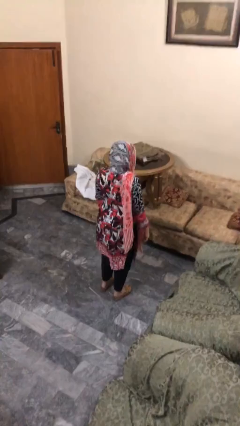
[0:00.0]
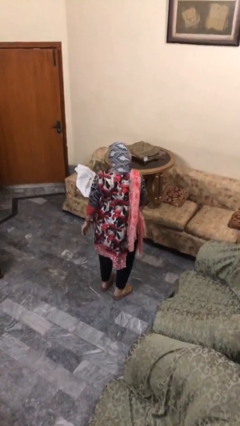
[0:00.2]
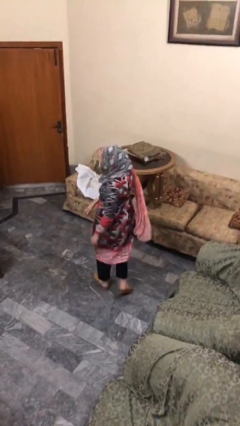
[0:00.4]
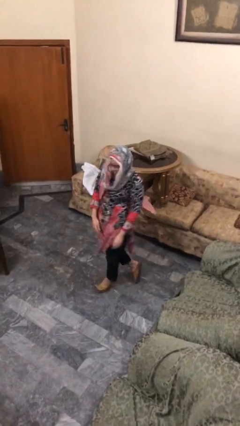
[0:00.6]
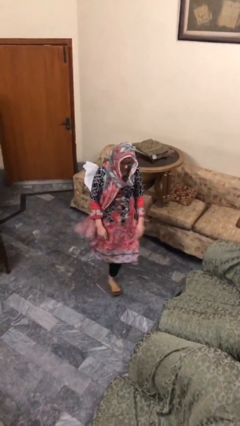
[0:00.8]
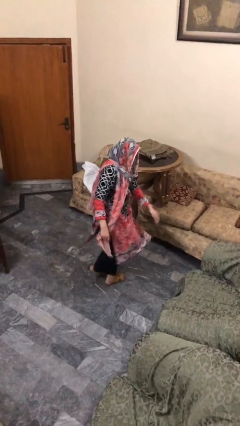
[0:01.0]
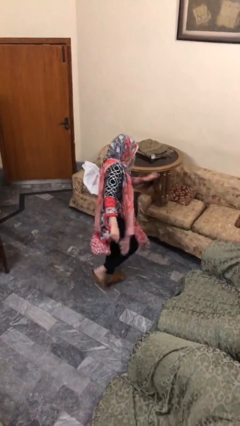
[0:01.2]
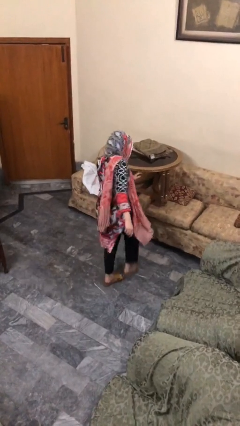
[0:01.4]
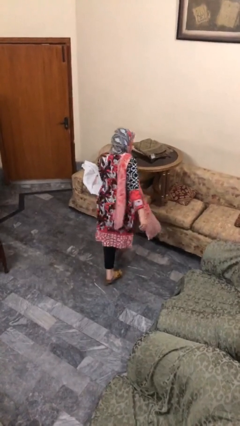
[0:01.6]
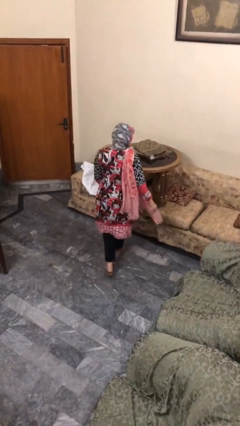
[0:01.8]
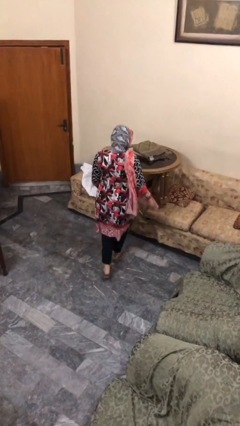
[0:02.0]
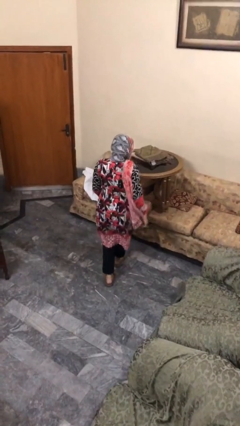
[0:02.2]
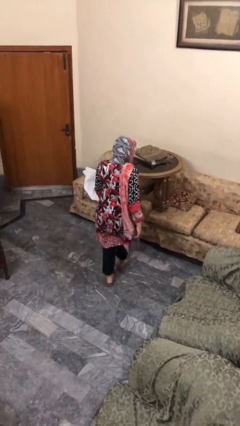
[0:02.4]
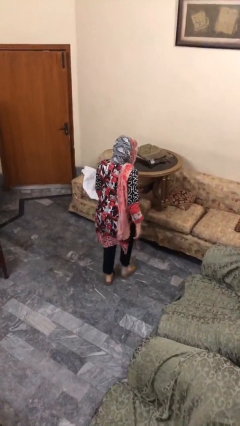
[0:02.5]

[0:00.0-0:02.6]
person twirls

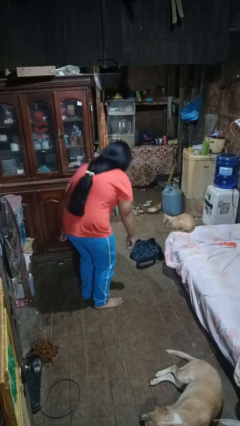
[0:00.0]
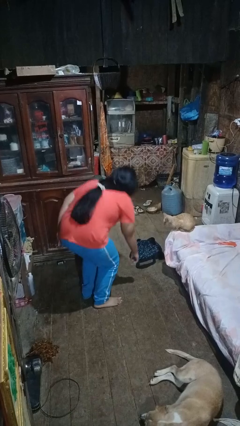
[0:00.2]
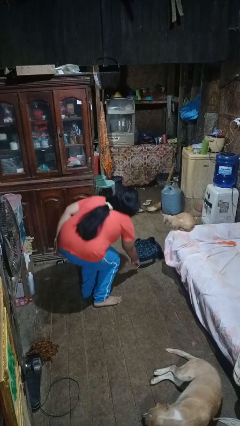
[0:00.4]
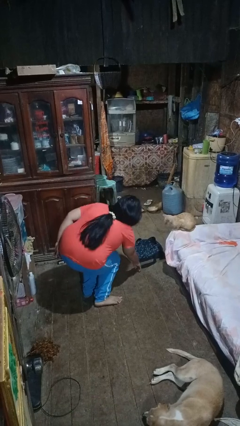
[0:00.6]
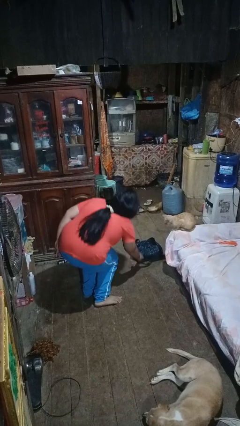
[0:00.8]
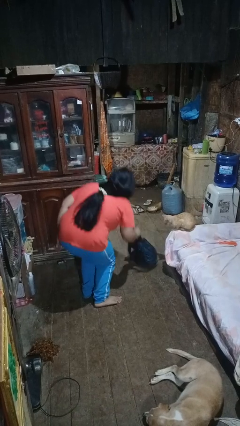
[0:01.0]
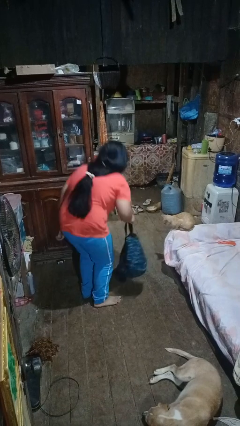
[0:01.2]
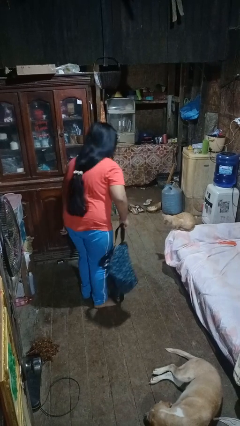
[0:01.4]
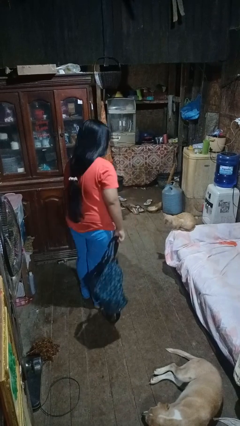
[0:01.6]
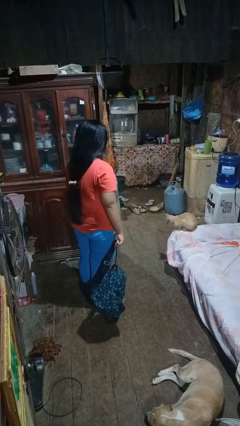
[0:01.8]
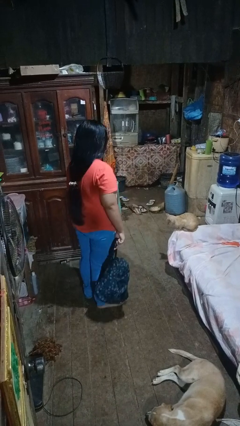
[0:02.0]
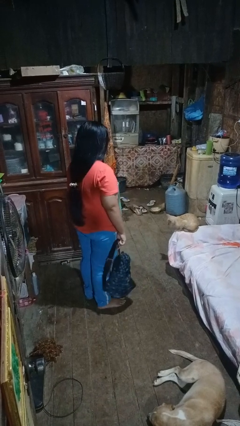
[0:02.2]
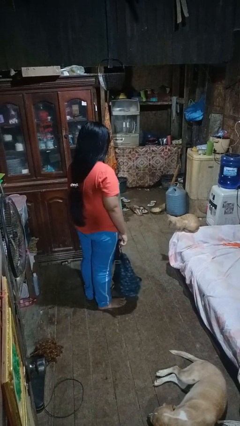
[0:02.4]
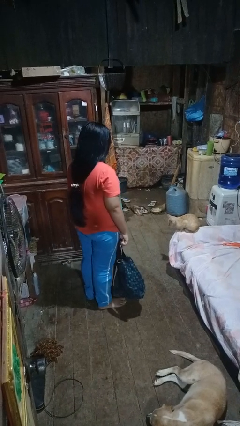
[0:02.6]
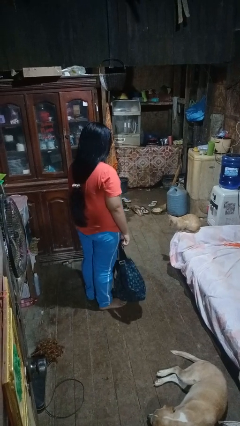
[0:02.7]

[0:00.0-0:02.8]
person picks up object from floor

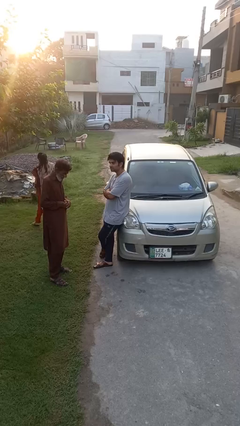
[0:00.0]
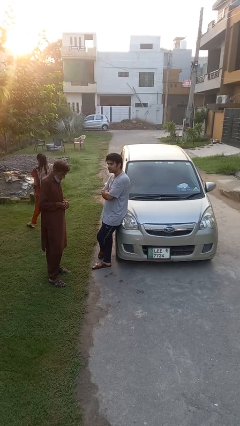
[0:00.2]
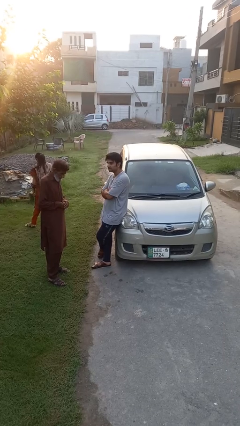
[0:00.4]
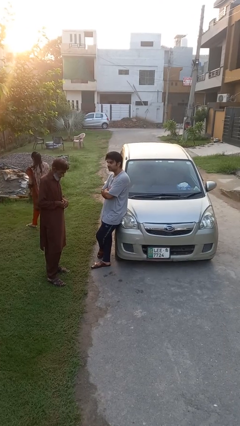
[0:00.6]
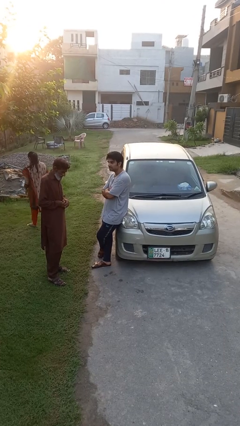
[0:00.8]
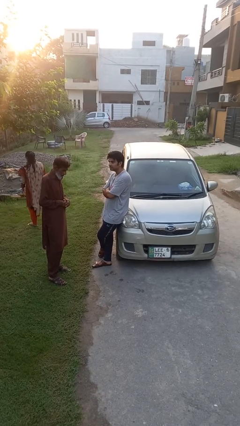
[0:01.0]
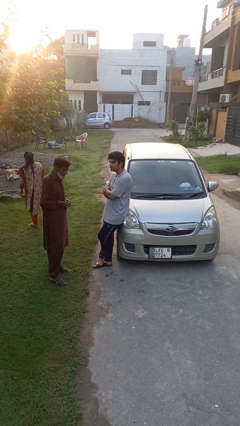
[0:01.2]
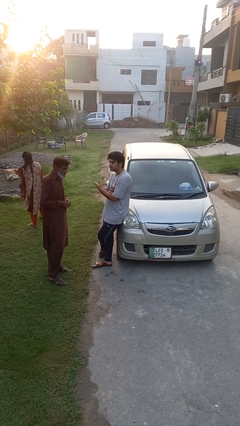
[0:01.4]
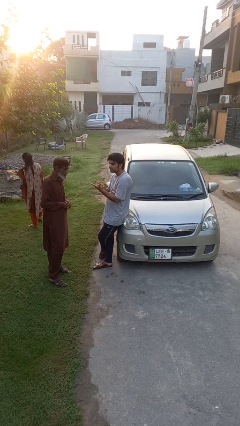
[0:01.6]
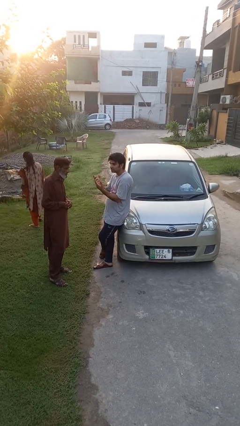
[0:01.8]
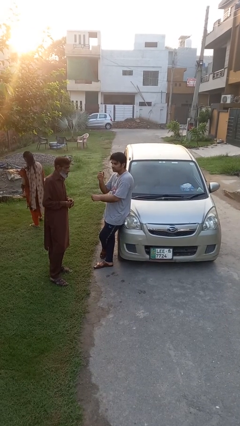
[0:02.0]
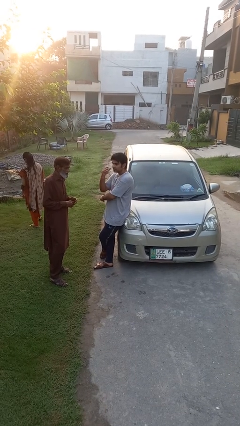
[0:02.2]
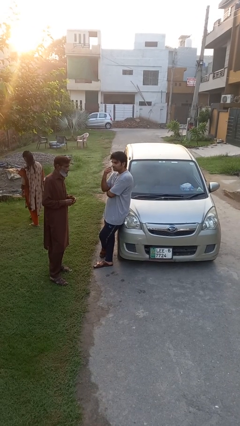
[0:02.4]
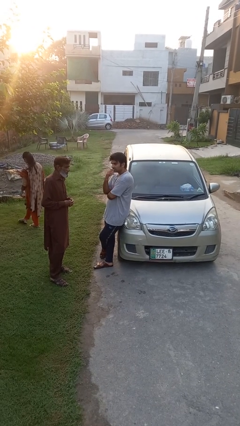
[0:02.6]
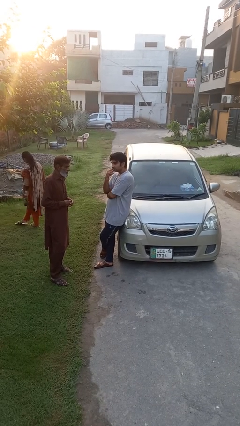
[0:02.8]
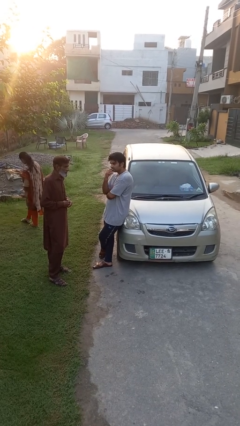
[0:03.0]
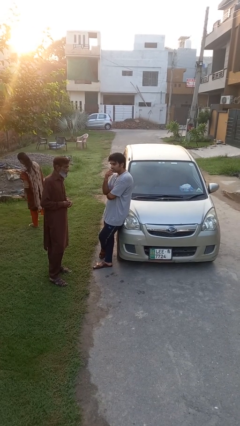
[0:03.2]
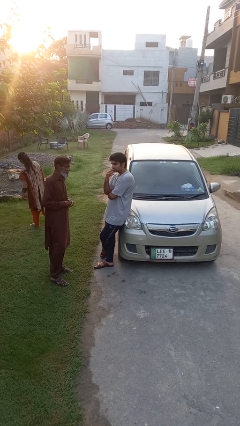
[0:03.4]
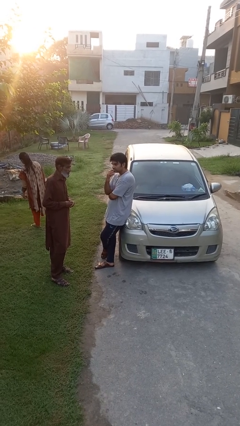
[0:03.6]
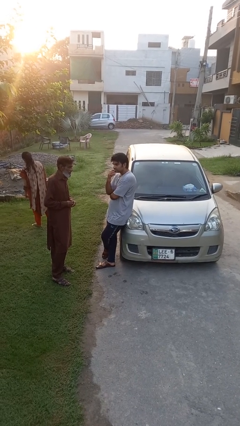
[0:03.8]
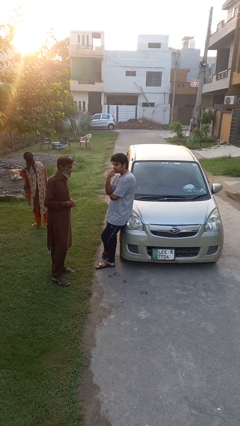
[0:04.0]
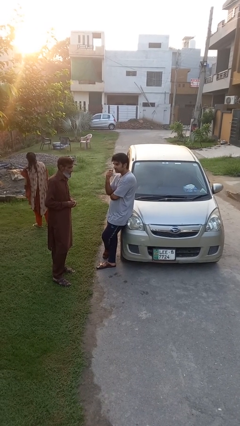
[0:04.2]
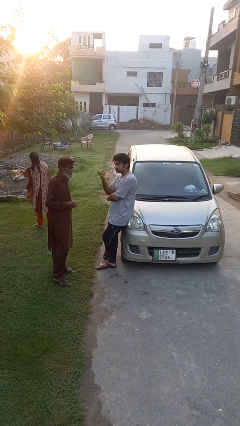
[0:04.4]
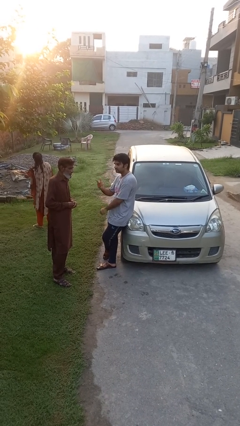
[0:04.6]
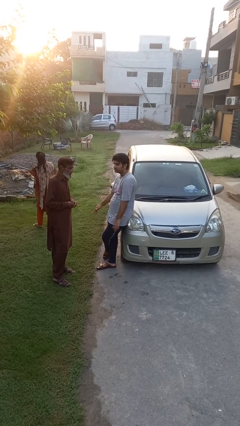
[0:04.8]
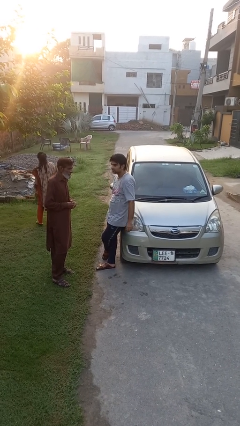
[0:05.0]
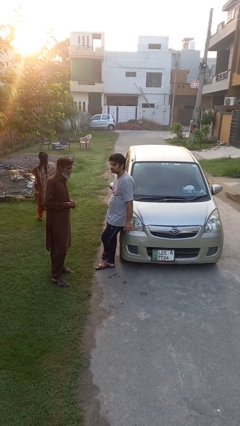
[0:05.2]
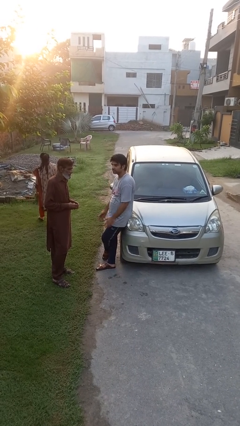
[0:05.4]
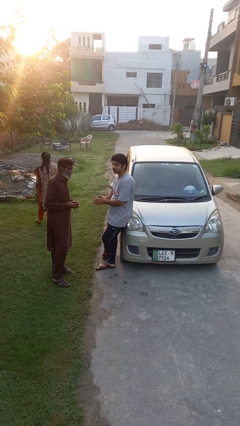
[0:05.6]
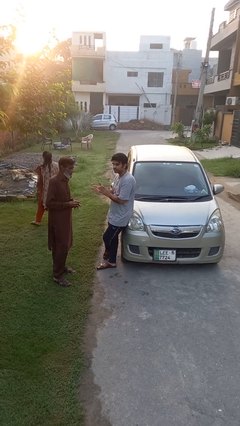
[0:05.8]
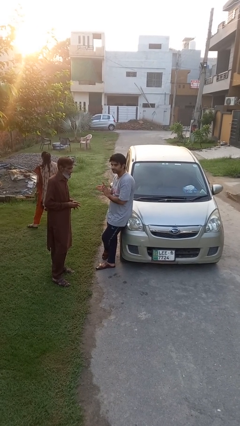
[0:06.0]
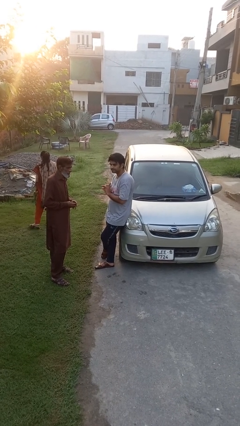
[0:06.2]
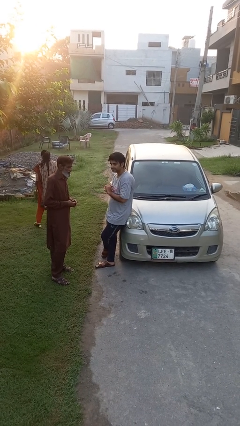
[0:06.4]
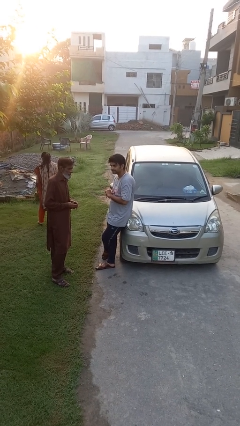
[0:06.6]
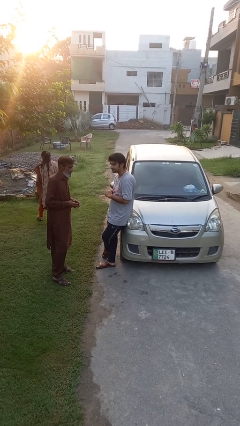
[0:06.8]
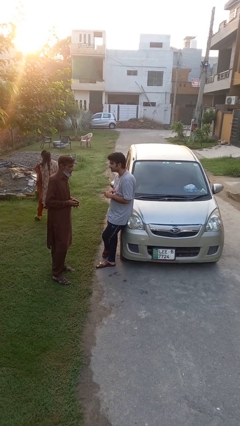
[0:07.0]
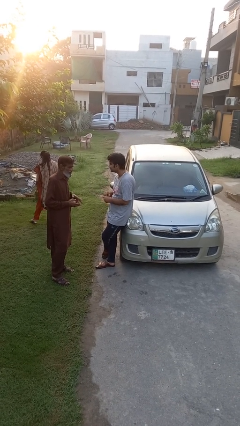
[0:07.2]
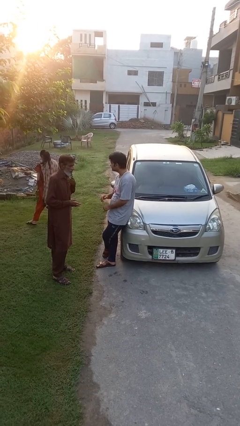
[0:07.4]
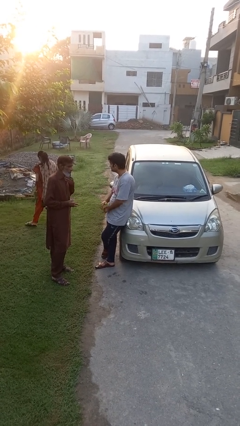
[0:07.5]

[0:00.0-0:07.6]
person talks to person

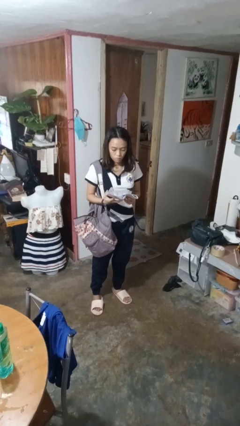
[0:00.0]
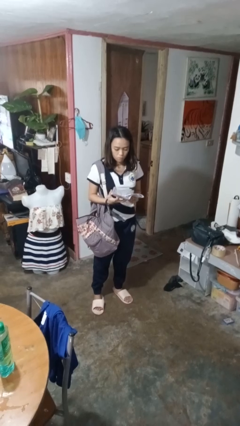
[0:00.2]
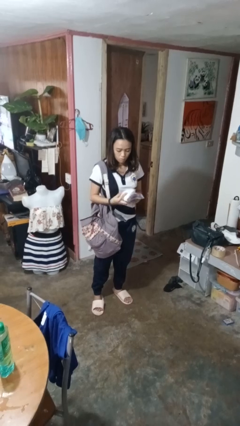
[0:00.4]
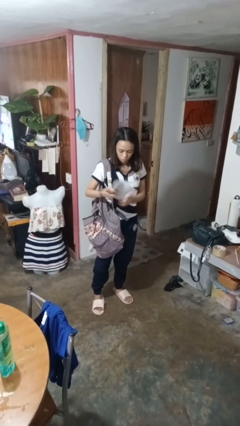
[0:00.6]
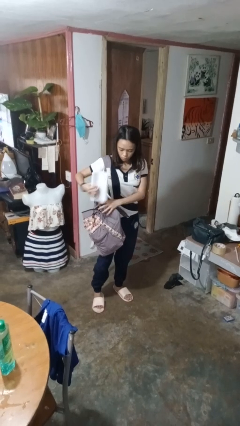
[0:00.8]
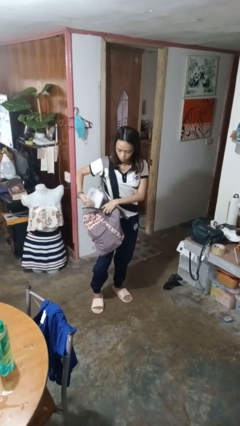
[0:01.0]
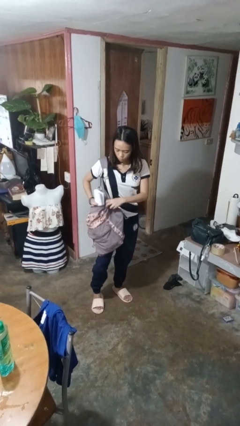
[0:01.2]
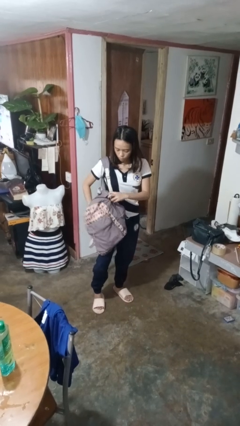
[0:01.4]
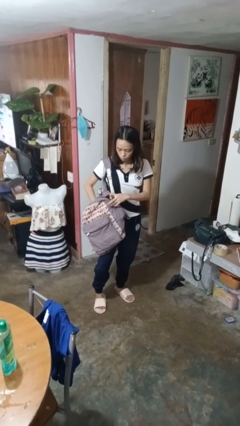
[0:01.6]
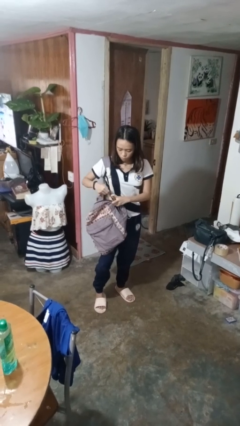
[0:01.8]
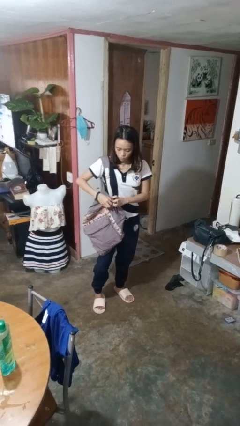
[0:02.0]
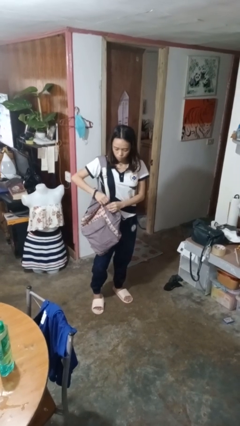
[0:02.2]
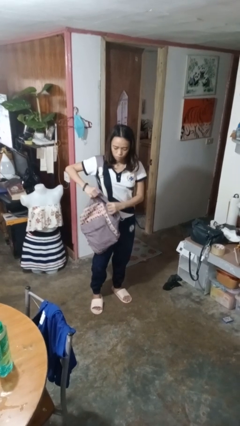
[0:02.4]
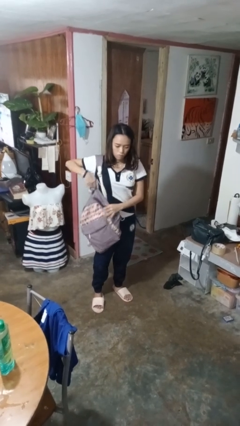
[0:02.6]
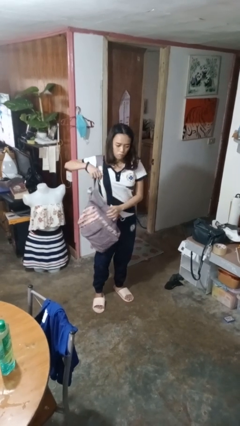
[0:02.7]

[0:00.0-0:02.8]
person puts object into backpack

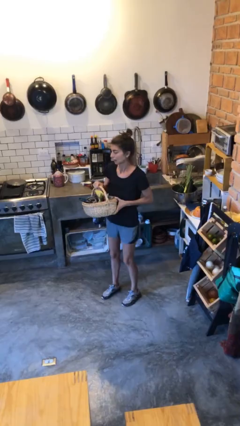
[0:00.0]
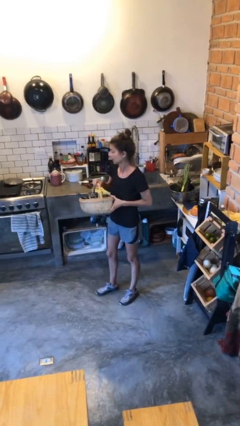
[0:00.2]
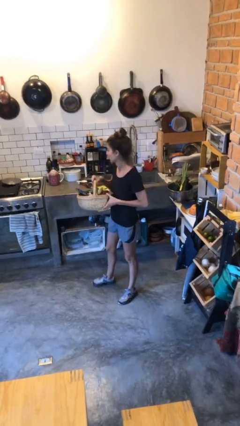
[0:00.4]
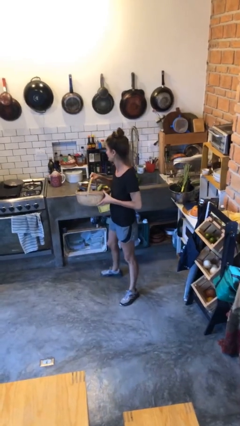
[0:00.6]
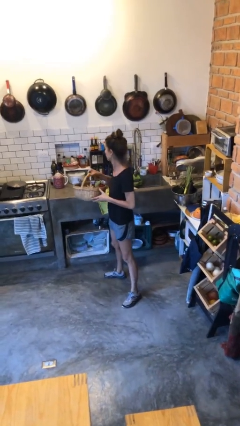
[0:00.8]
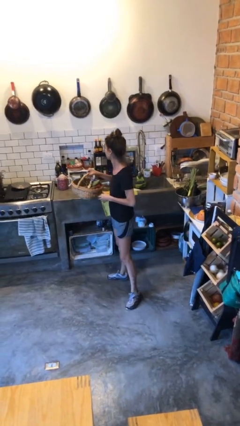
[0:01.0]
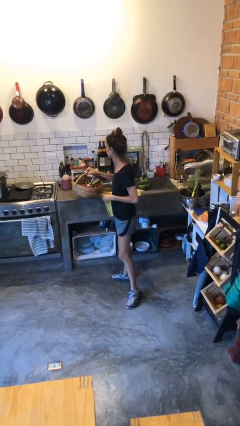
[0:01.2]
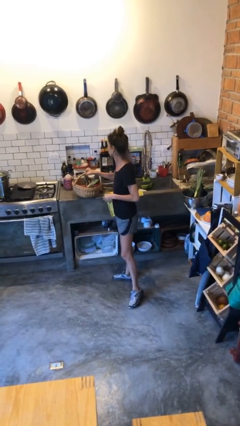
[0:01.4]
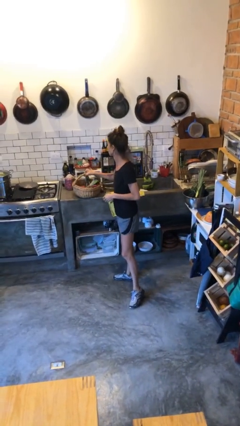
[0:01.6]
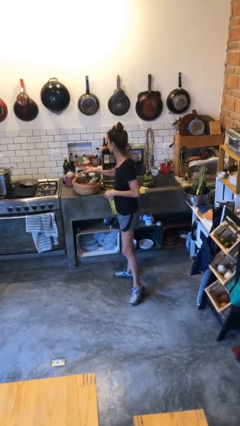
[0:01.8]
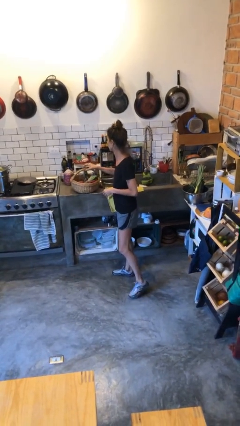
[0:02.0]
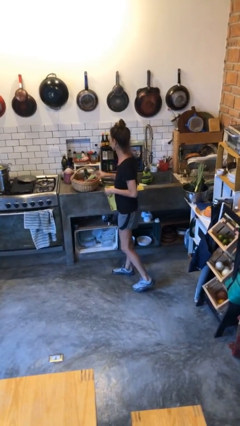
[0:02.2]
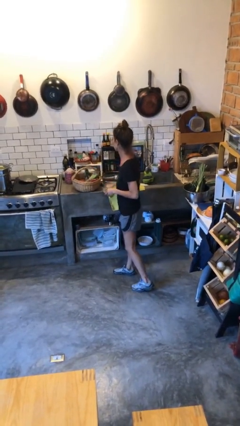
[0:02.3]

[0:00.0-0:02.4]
person puts down object on countertop
